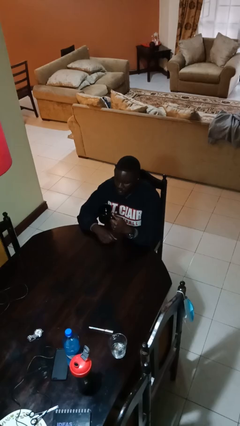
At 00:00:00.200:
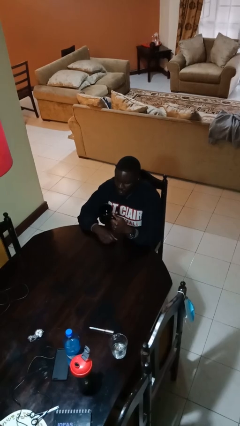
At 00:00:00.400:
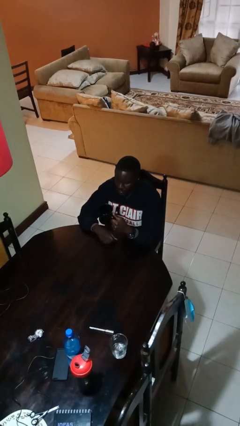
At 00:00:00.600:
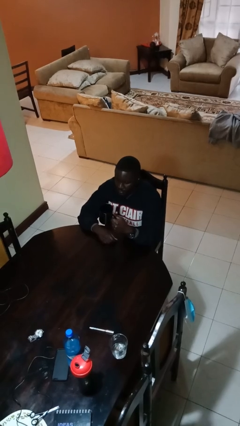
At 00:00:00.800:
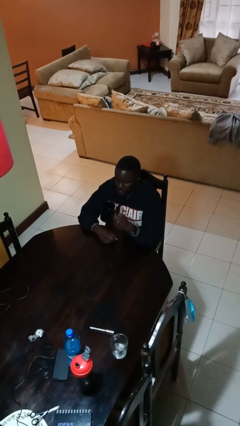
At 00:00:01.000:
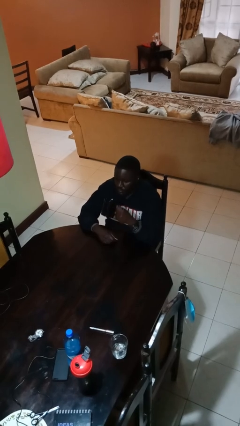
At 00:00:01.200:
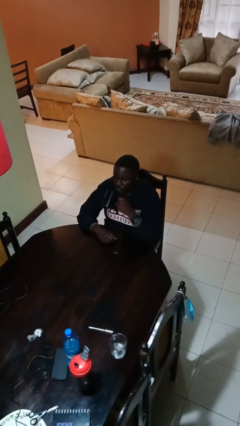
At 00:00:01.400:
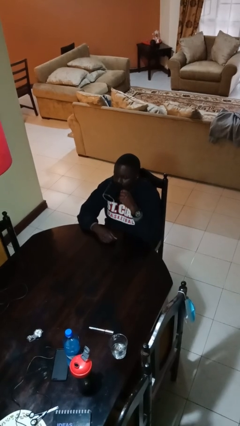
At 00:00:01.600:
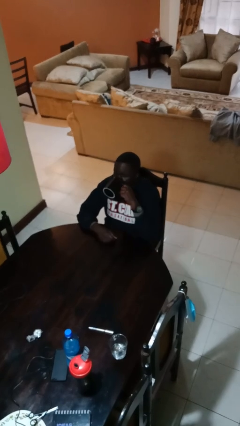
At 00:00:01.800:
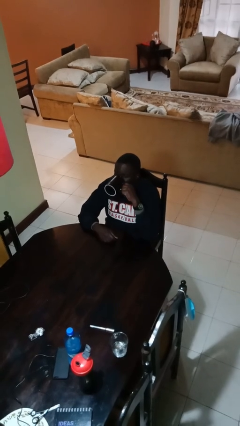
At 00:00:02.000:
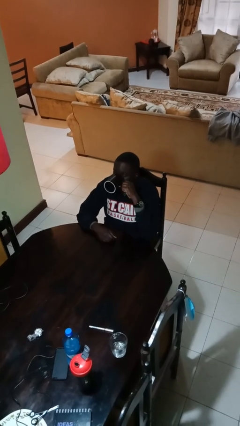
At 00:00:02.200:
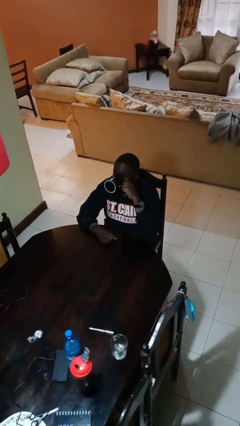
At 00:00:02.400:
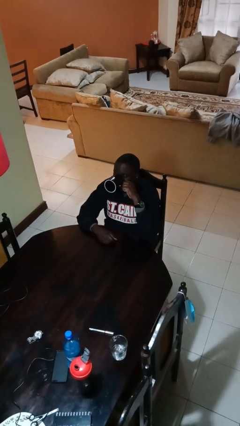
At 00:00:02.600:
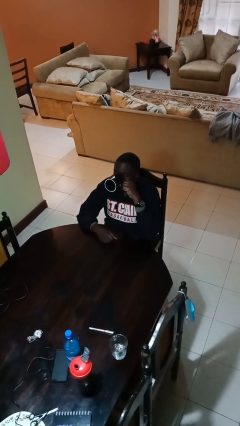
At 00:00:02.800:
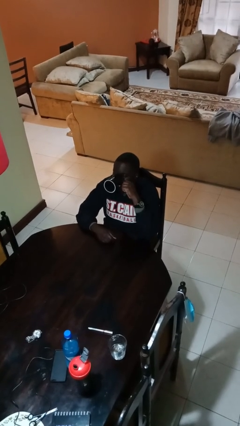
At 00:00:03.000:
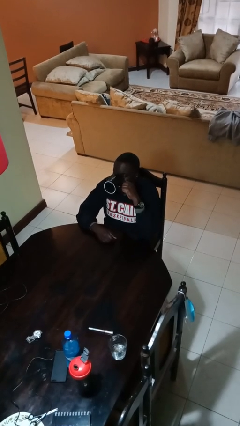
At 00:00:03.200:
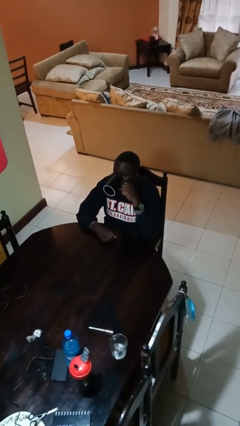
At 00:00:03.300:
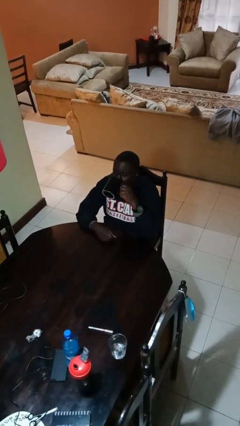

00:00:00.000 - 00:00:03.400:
person drinks from mug

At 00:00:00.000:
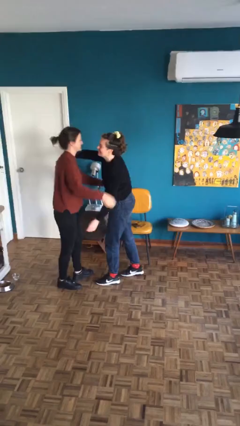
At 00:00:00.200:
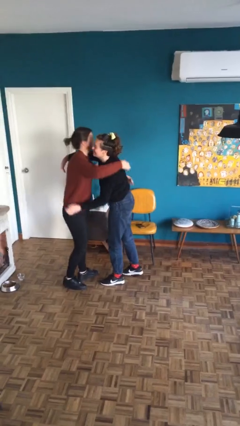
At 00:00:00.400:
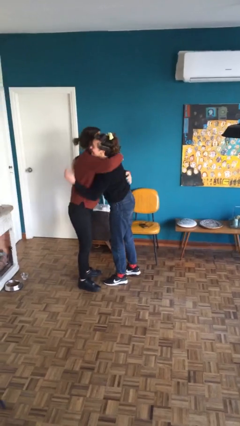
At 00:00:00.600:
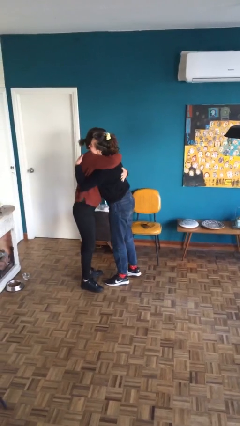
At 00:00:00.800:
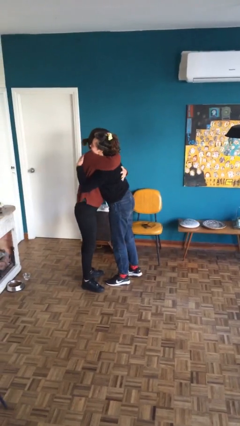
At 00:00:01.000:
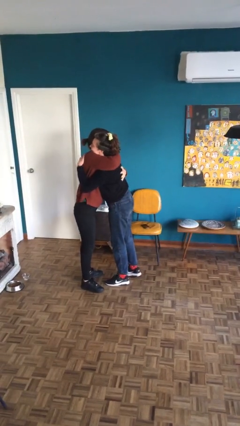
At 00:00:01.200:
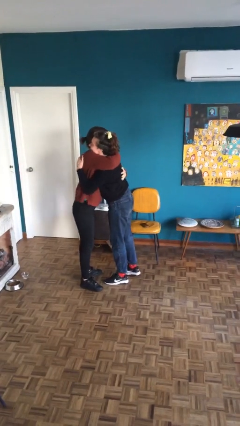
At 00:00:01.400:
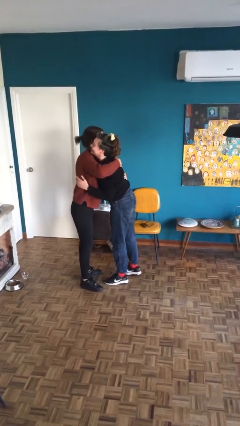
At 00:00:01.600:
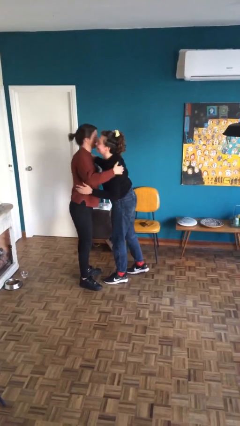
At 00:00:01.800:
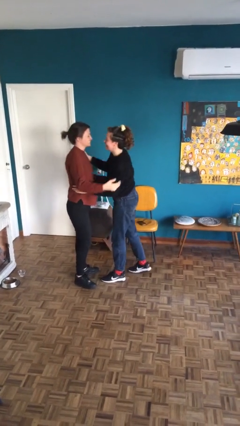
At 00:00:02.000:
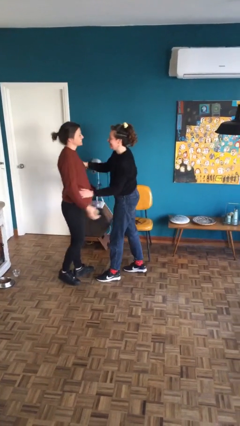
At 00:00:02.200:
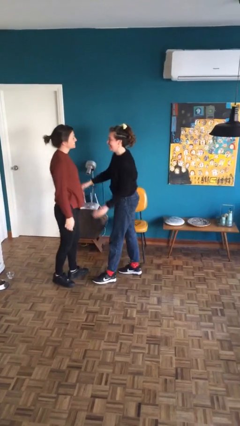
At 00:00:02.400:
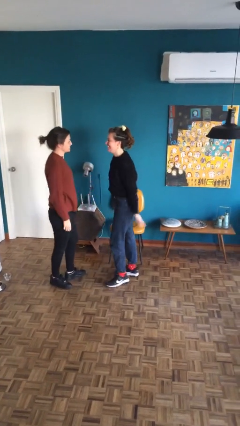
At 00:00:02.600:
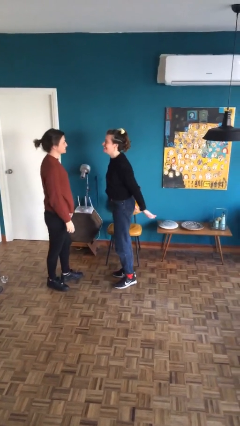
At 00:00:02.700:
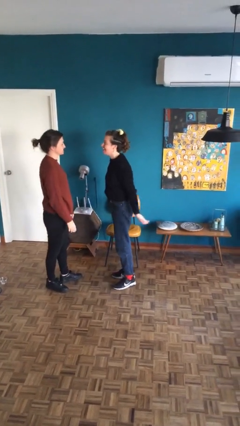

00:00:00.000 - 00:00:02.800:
person embraces person

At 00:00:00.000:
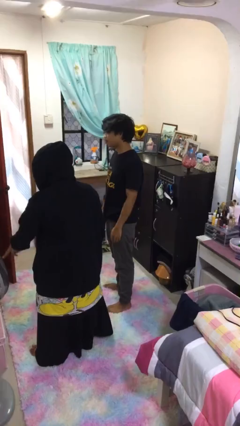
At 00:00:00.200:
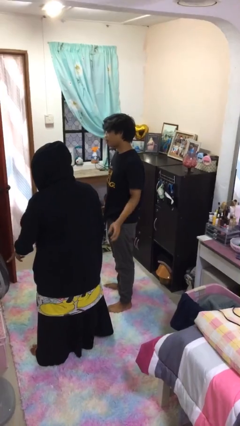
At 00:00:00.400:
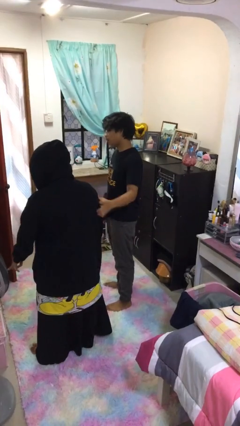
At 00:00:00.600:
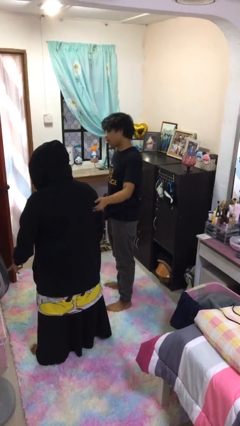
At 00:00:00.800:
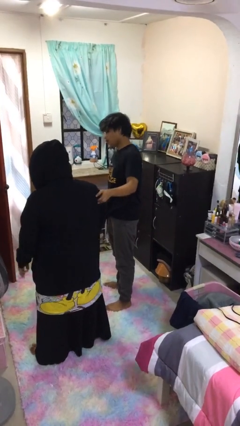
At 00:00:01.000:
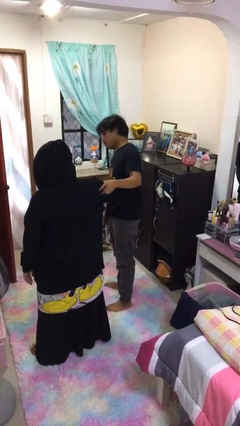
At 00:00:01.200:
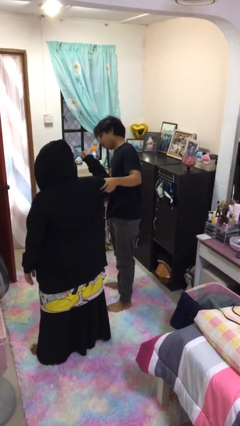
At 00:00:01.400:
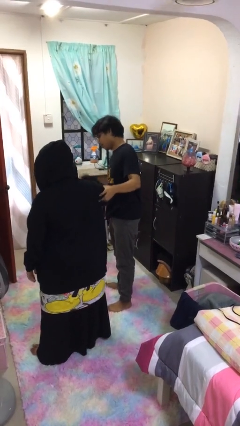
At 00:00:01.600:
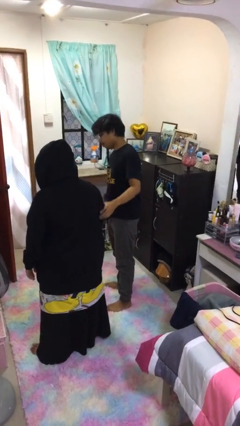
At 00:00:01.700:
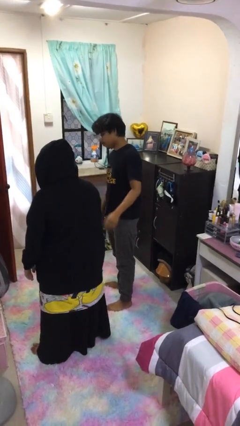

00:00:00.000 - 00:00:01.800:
person grabs person by bicep

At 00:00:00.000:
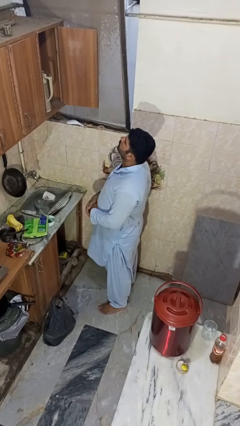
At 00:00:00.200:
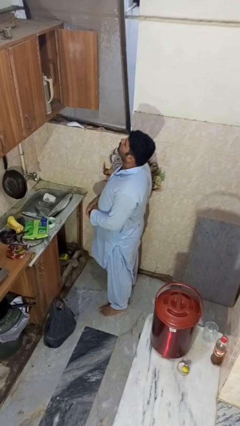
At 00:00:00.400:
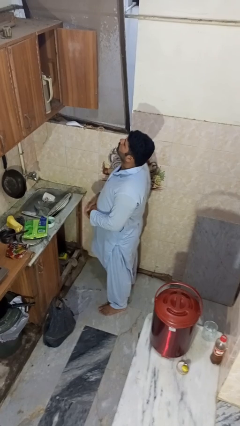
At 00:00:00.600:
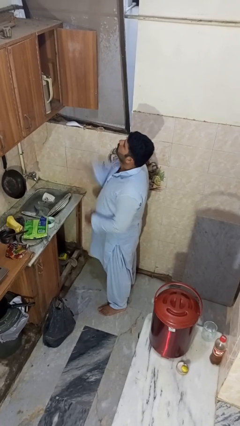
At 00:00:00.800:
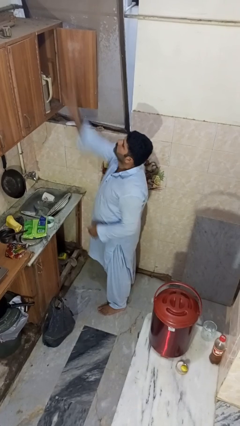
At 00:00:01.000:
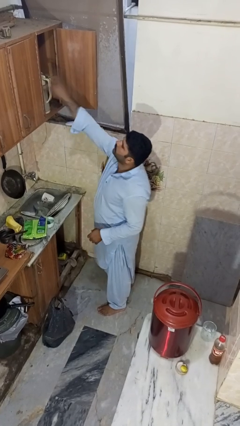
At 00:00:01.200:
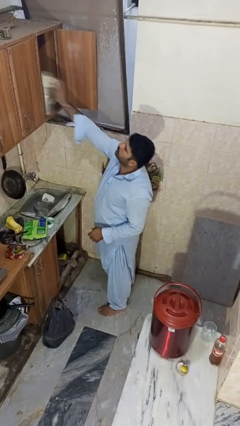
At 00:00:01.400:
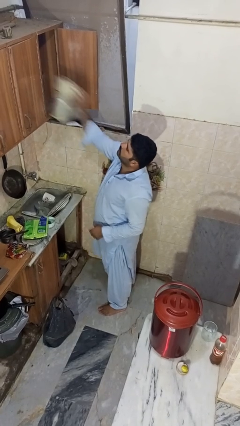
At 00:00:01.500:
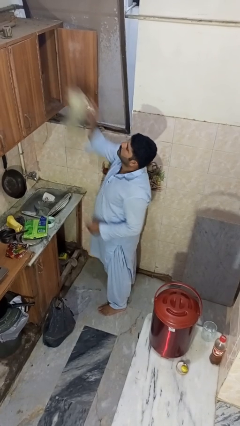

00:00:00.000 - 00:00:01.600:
person takes object from cabinet

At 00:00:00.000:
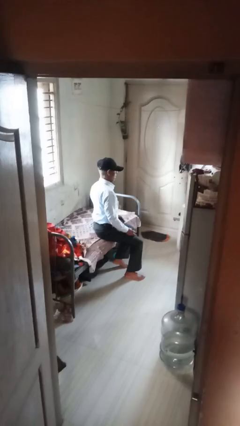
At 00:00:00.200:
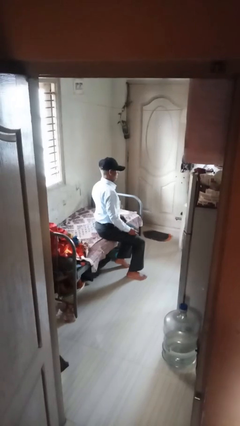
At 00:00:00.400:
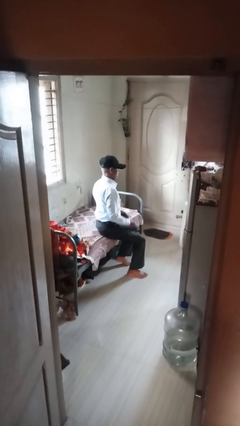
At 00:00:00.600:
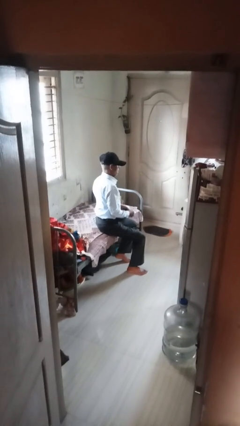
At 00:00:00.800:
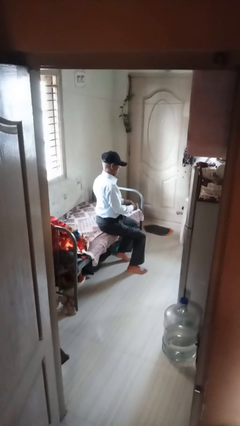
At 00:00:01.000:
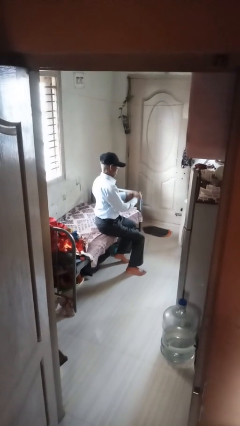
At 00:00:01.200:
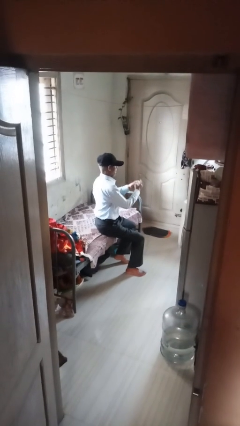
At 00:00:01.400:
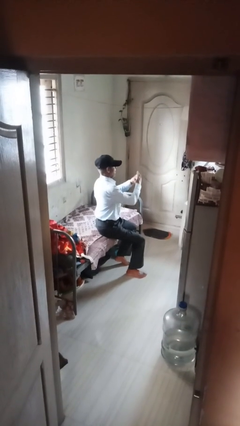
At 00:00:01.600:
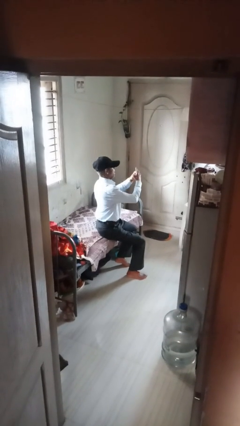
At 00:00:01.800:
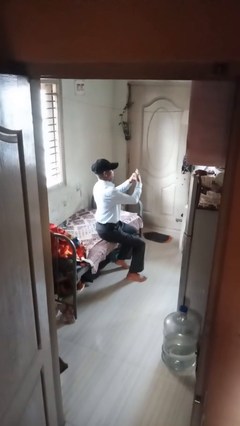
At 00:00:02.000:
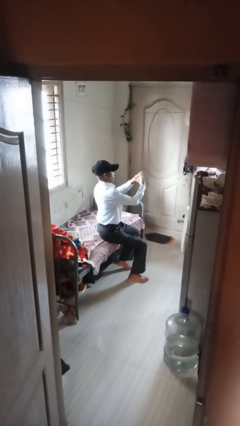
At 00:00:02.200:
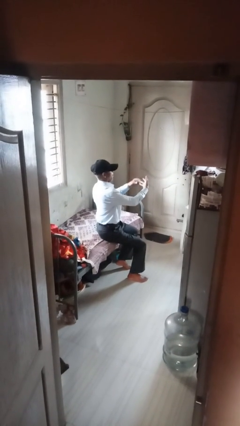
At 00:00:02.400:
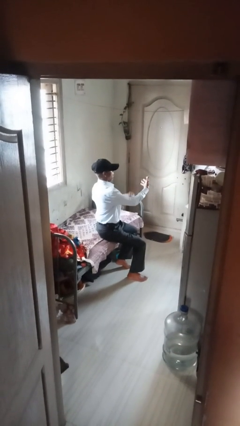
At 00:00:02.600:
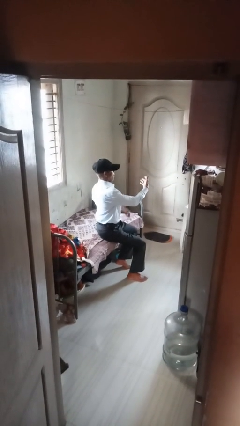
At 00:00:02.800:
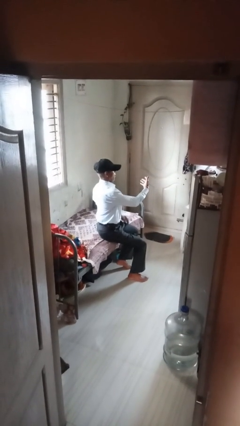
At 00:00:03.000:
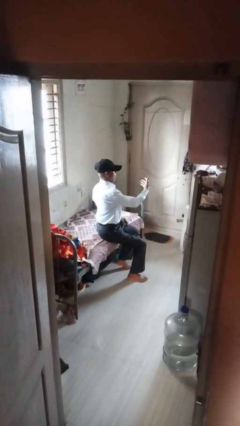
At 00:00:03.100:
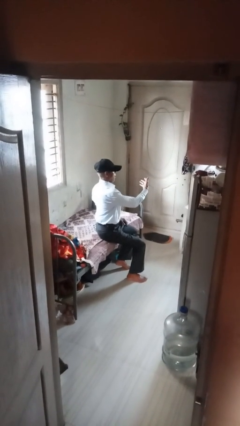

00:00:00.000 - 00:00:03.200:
person puts on ring

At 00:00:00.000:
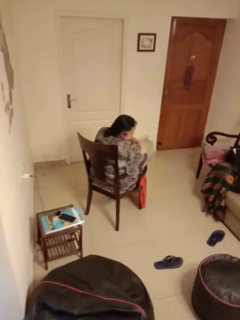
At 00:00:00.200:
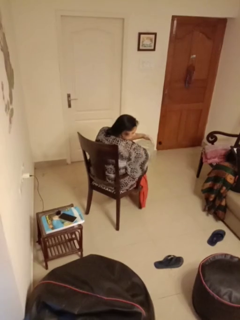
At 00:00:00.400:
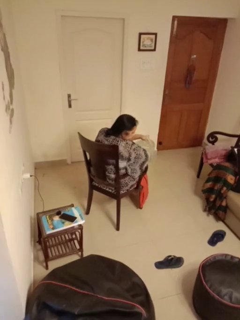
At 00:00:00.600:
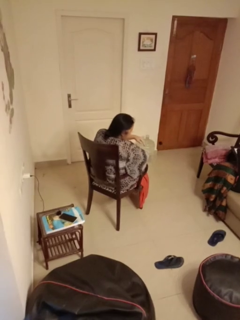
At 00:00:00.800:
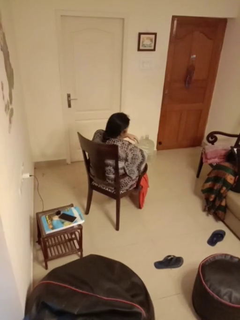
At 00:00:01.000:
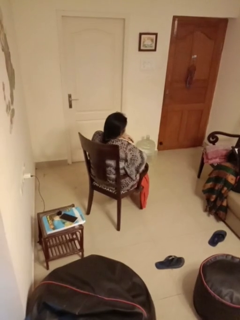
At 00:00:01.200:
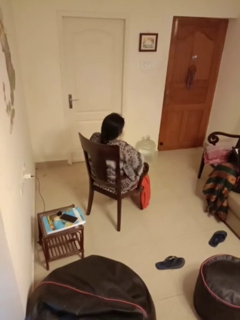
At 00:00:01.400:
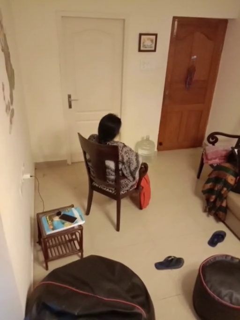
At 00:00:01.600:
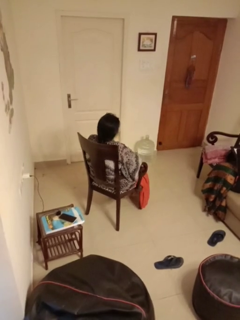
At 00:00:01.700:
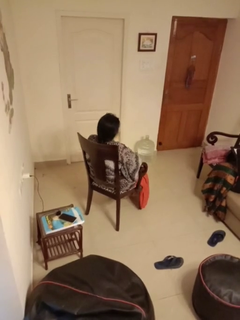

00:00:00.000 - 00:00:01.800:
person swats bug

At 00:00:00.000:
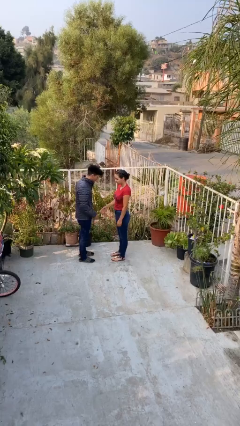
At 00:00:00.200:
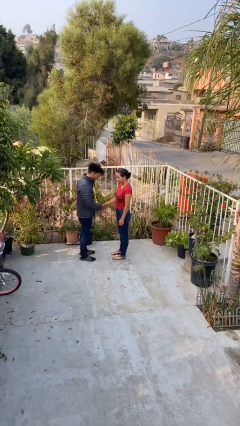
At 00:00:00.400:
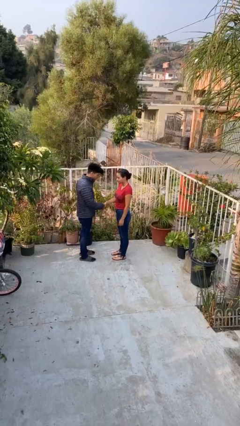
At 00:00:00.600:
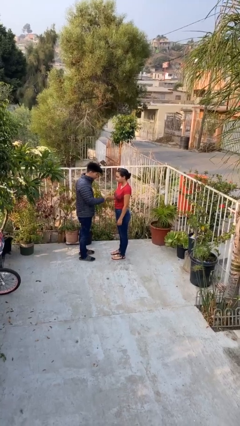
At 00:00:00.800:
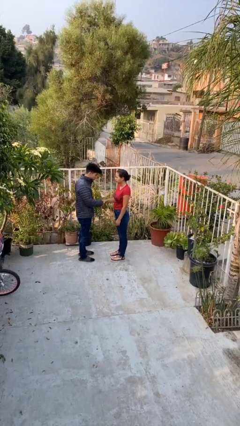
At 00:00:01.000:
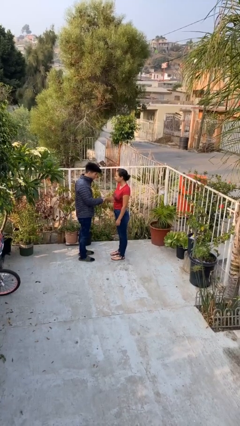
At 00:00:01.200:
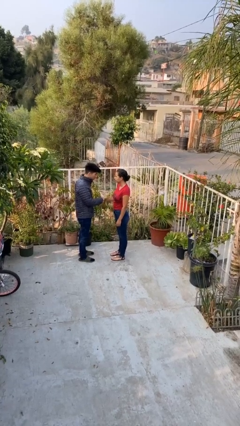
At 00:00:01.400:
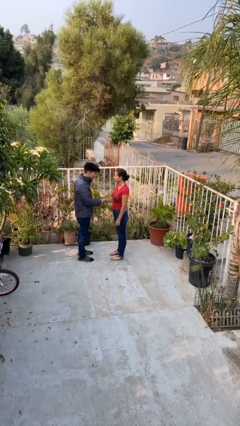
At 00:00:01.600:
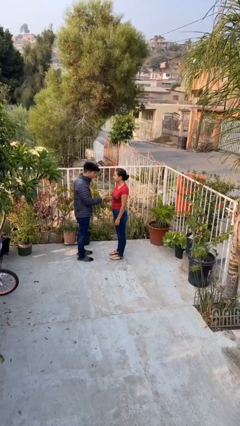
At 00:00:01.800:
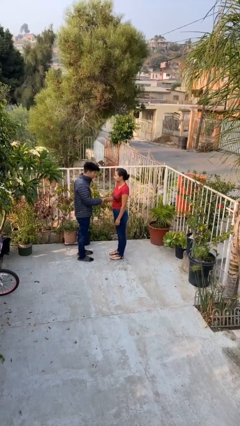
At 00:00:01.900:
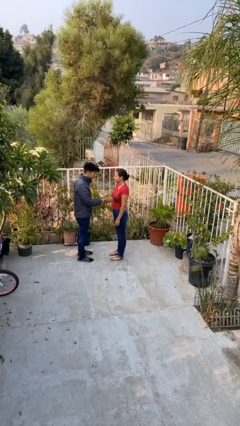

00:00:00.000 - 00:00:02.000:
person shakes hand

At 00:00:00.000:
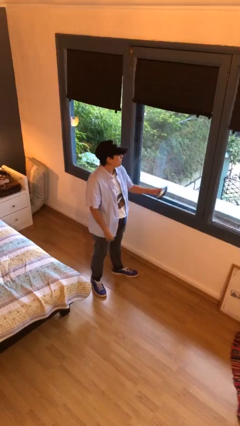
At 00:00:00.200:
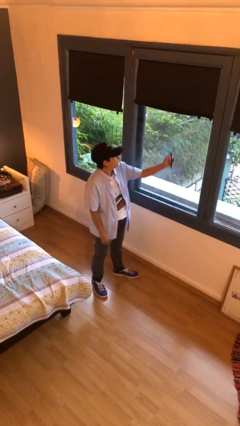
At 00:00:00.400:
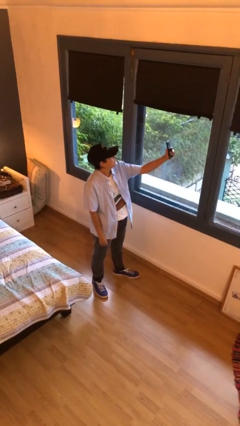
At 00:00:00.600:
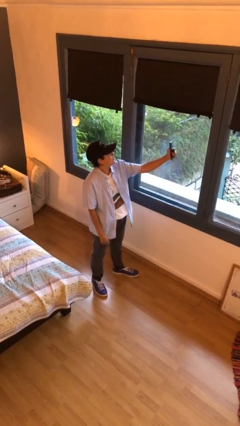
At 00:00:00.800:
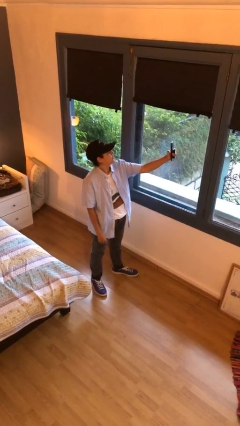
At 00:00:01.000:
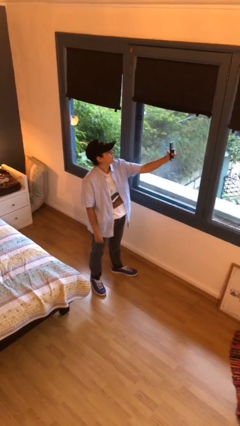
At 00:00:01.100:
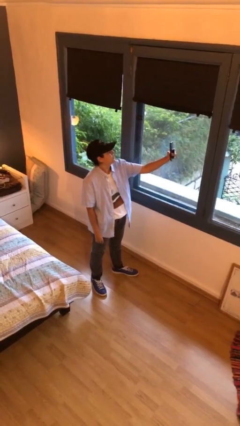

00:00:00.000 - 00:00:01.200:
person takes selfie
